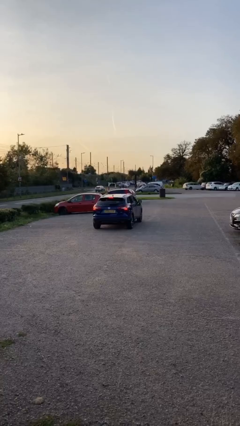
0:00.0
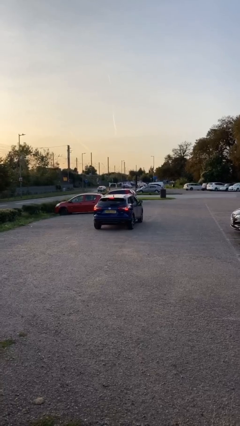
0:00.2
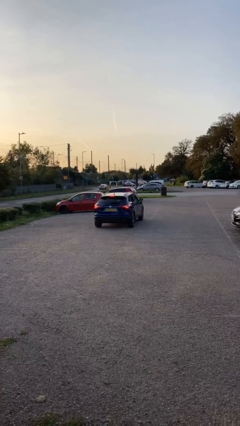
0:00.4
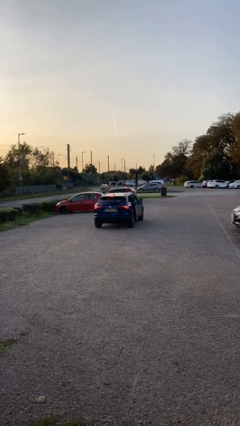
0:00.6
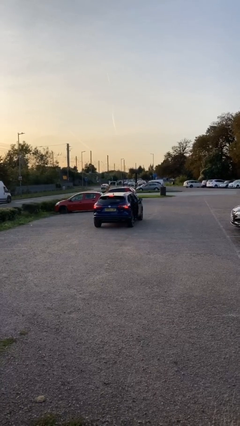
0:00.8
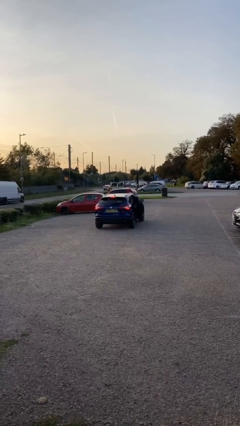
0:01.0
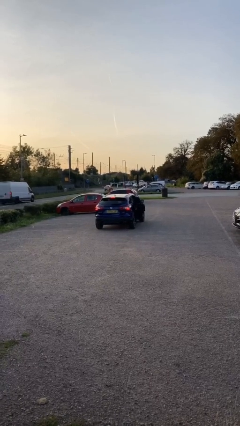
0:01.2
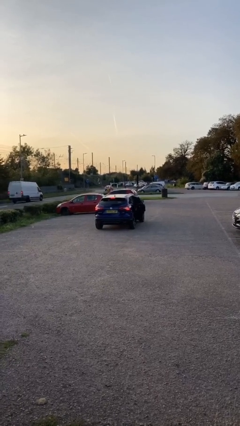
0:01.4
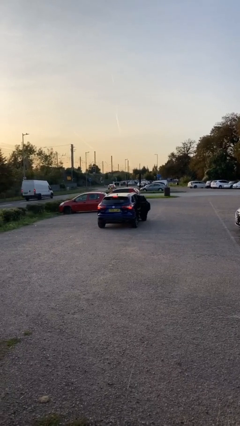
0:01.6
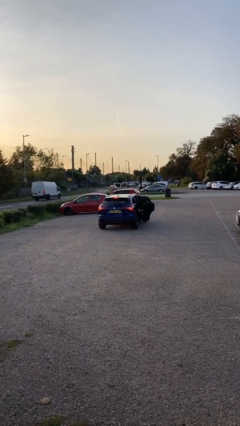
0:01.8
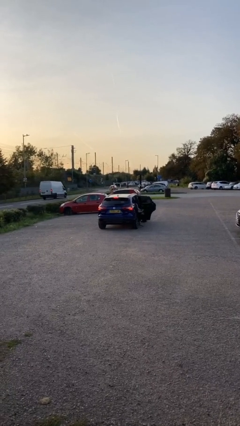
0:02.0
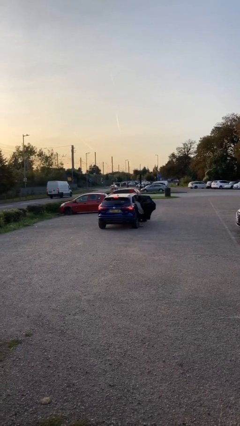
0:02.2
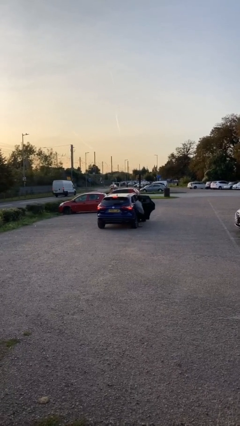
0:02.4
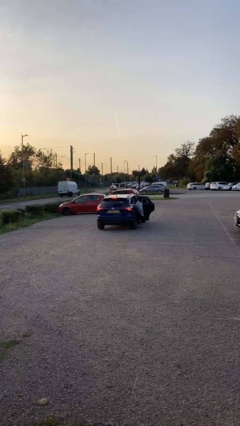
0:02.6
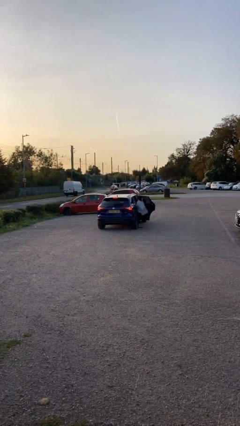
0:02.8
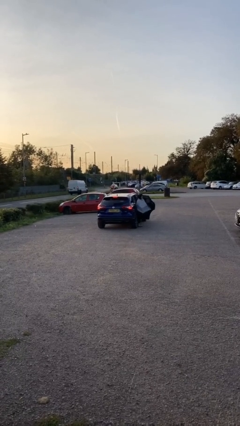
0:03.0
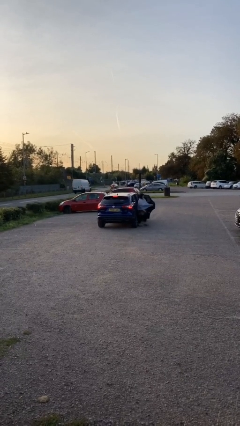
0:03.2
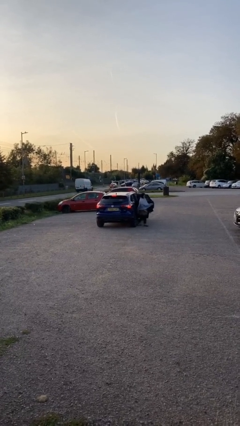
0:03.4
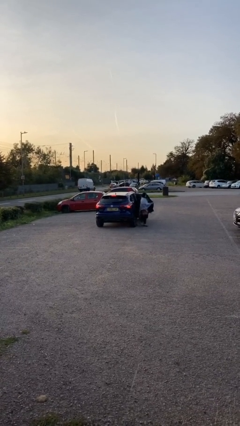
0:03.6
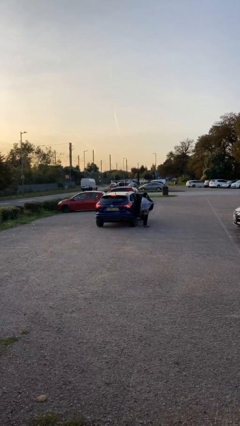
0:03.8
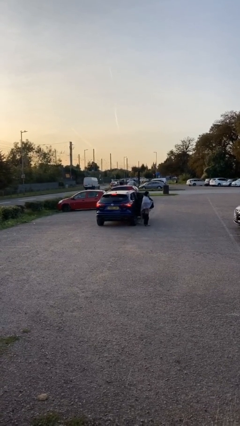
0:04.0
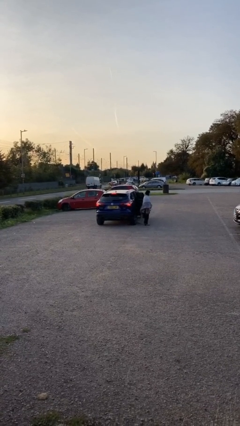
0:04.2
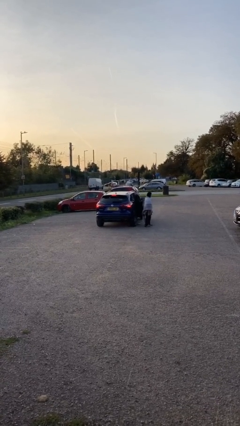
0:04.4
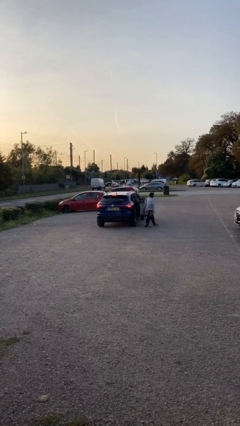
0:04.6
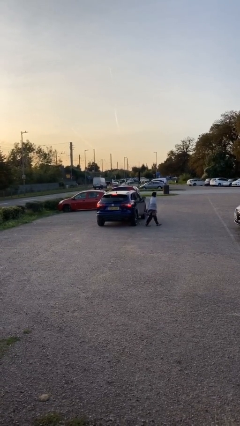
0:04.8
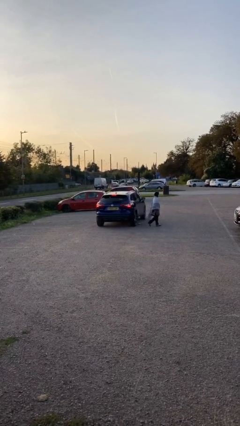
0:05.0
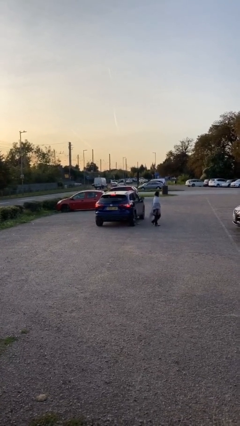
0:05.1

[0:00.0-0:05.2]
car drops off person

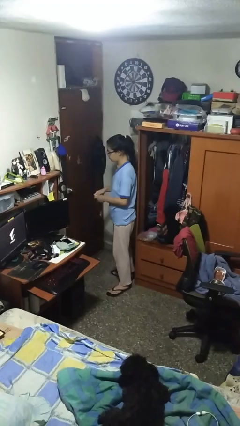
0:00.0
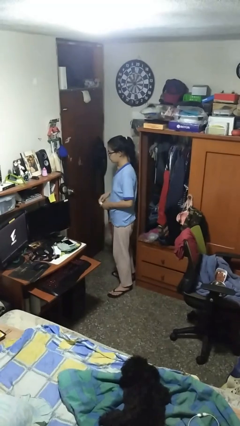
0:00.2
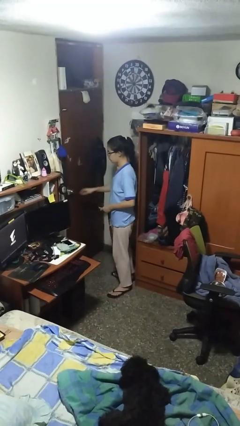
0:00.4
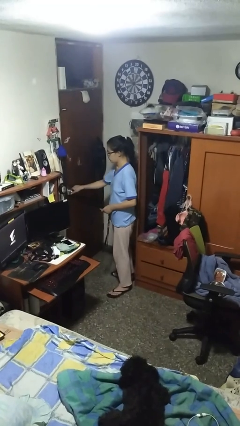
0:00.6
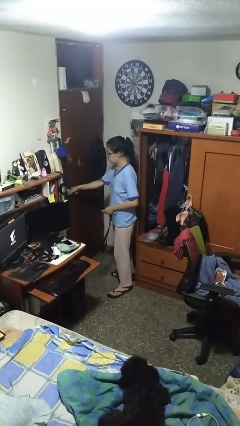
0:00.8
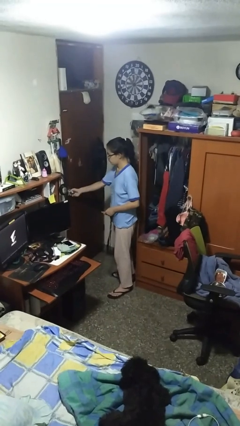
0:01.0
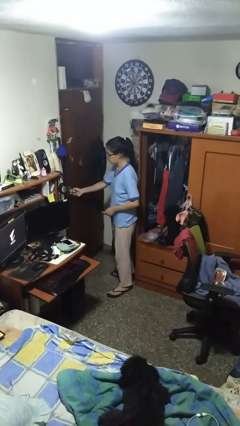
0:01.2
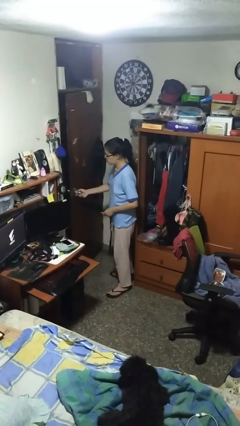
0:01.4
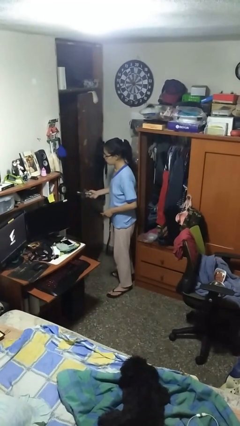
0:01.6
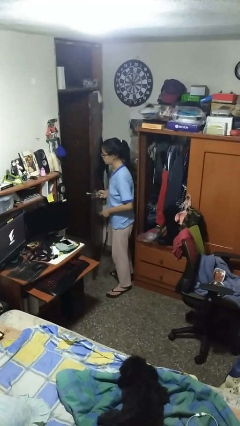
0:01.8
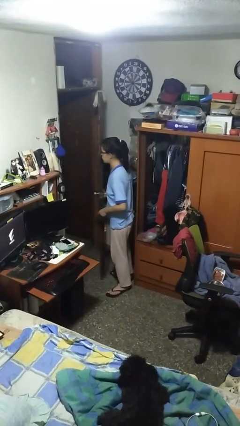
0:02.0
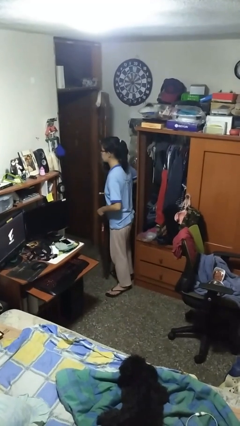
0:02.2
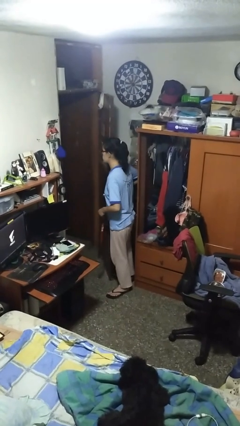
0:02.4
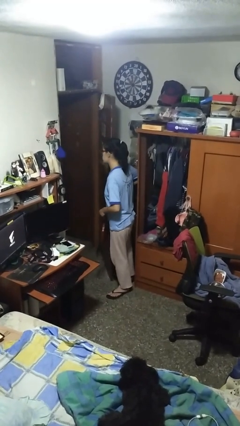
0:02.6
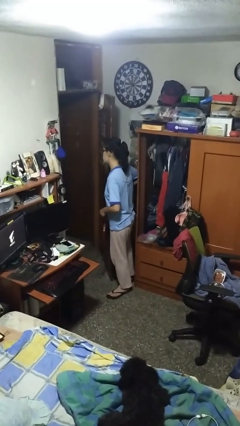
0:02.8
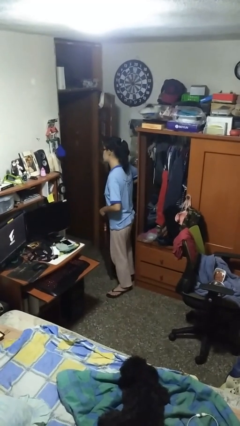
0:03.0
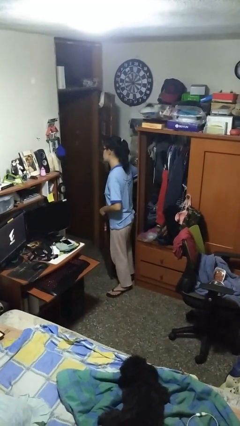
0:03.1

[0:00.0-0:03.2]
person opens facility door

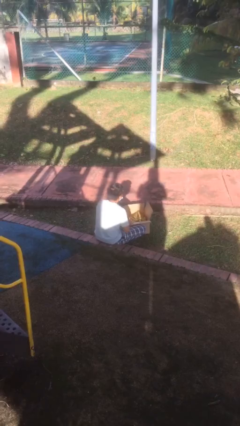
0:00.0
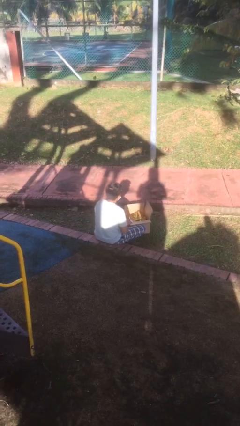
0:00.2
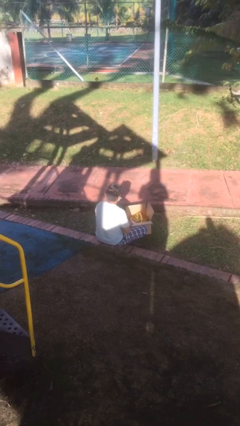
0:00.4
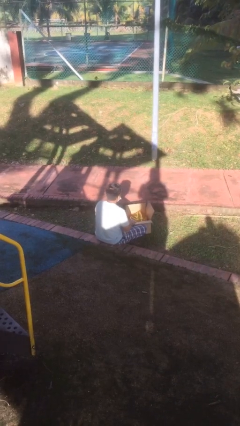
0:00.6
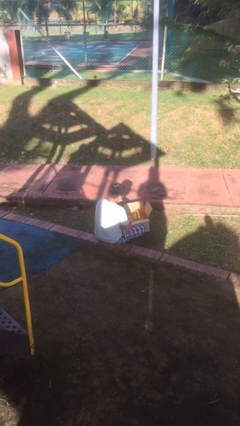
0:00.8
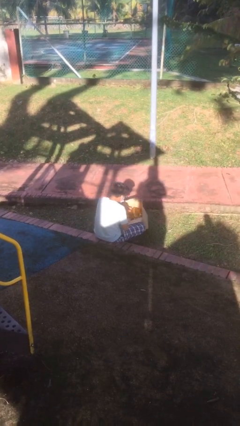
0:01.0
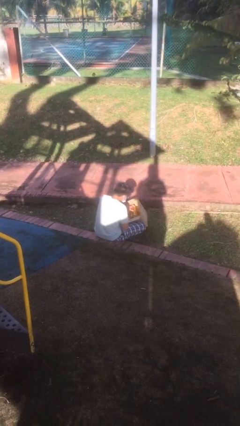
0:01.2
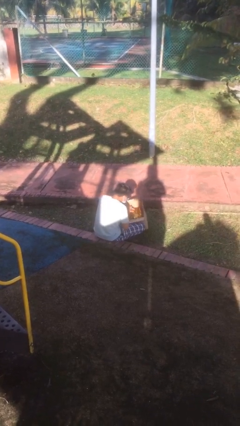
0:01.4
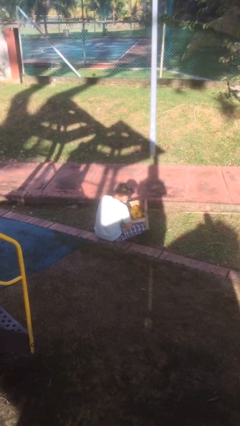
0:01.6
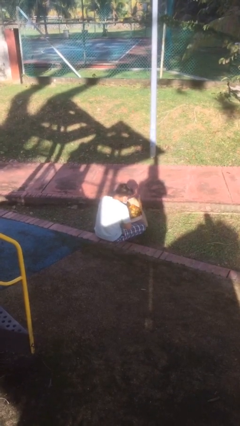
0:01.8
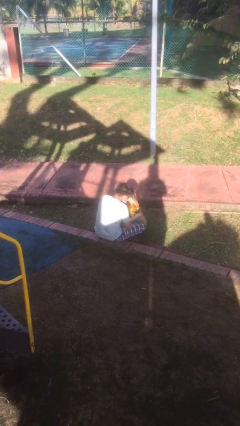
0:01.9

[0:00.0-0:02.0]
person searches in box

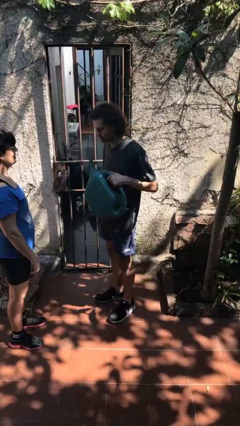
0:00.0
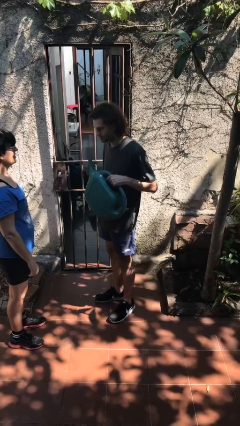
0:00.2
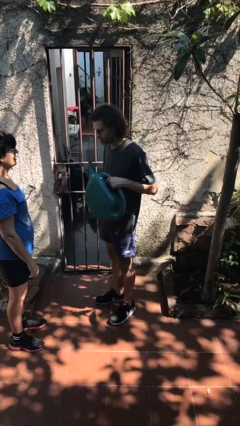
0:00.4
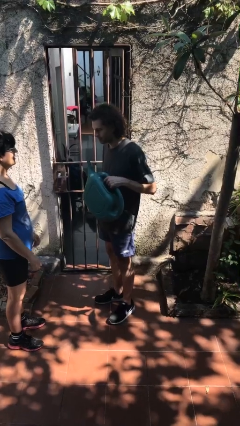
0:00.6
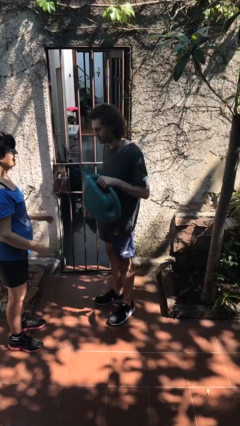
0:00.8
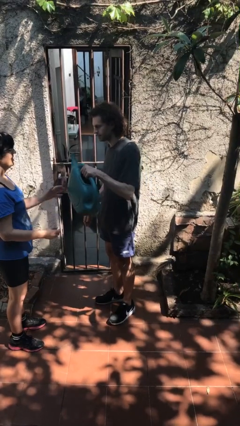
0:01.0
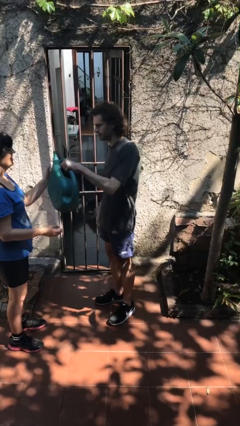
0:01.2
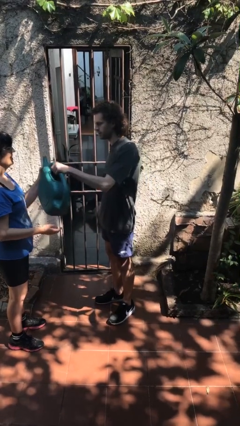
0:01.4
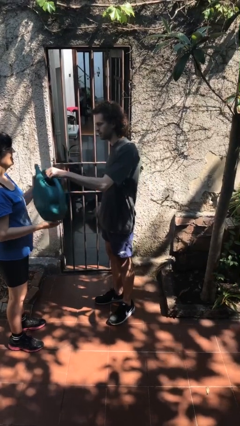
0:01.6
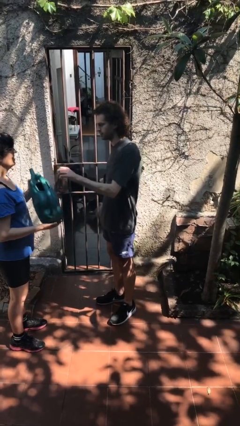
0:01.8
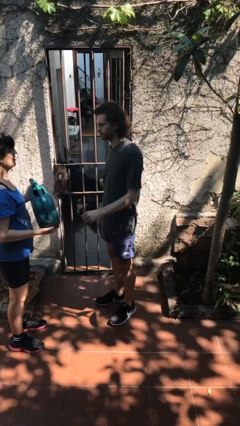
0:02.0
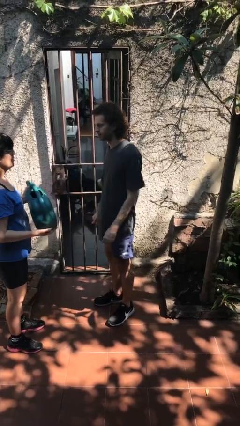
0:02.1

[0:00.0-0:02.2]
person transfers object to person

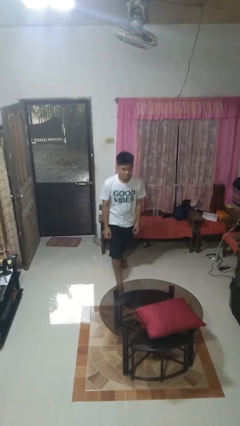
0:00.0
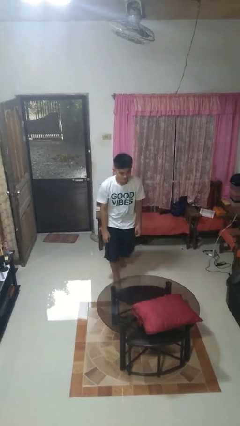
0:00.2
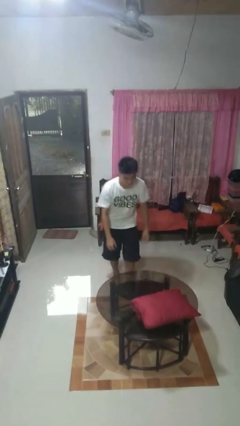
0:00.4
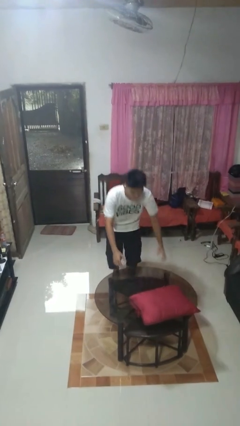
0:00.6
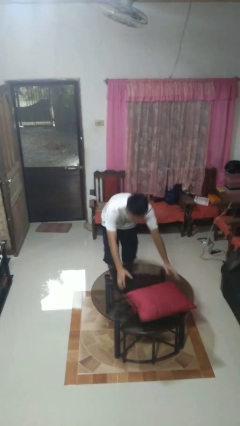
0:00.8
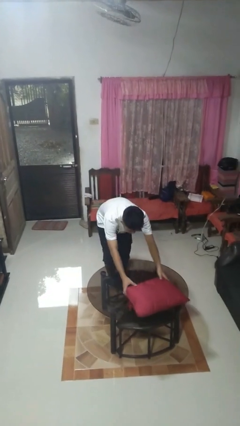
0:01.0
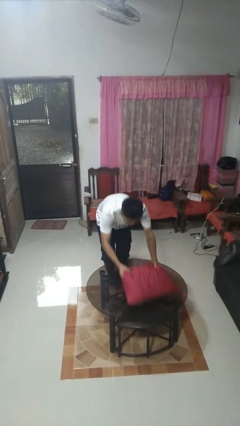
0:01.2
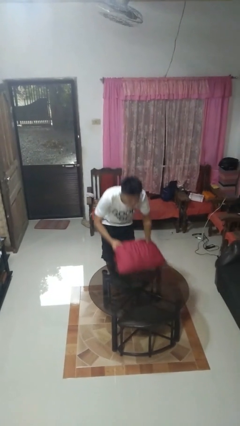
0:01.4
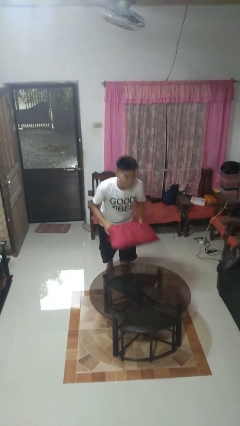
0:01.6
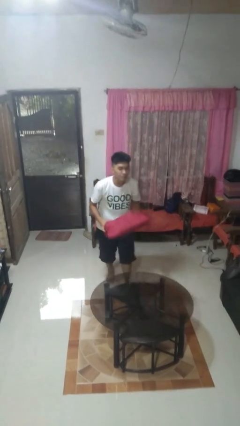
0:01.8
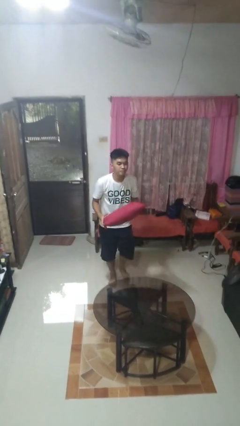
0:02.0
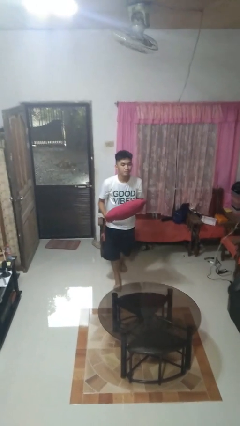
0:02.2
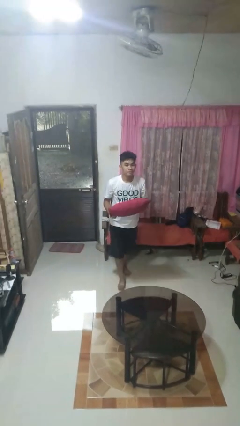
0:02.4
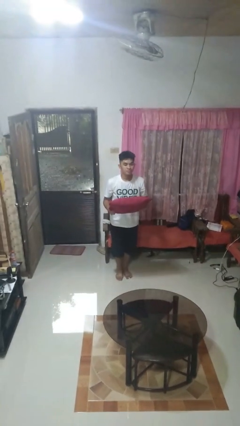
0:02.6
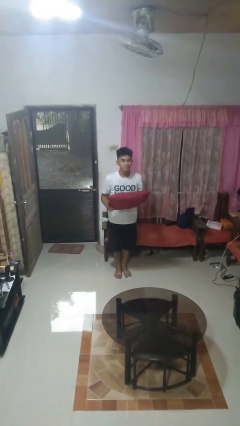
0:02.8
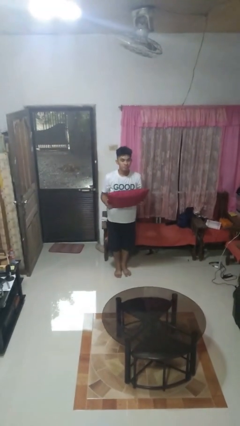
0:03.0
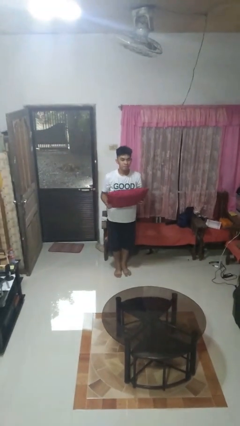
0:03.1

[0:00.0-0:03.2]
person picks up object from table

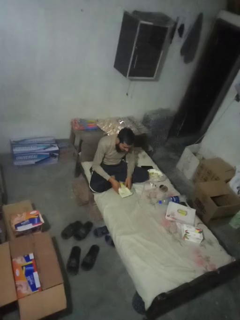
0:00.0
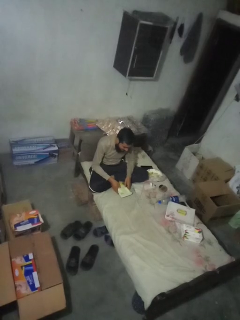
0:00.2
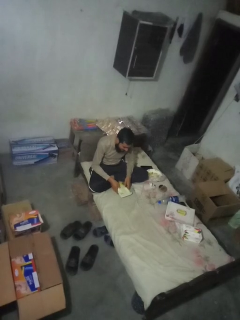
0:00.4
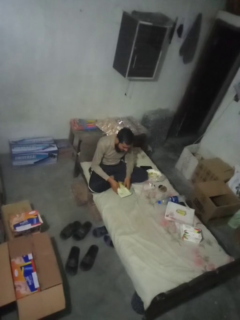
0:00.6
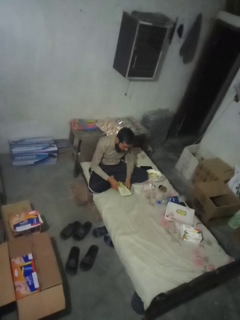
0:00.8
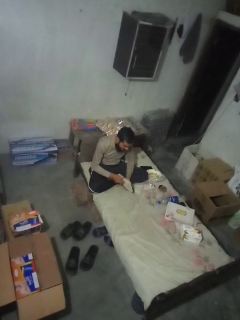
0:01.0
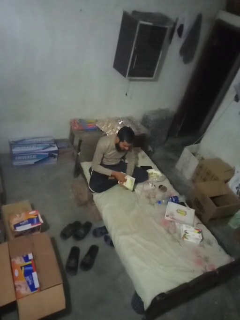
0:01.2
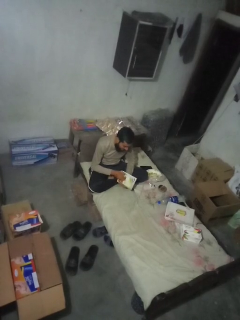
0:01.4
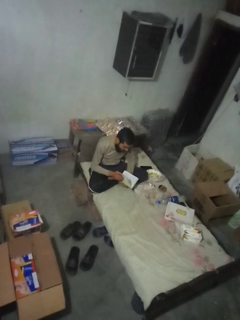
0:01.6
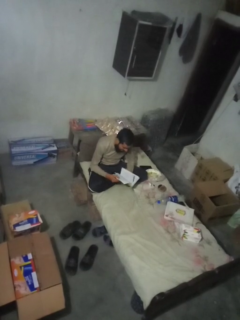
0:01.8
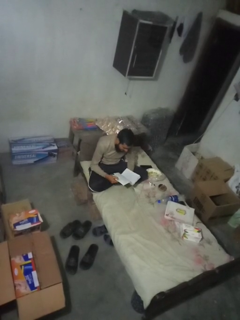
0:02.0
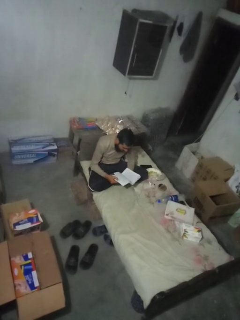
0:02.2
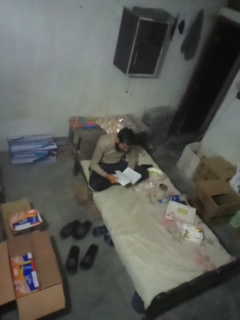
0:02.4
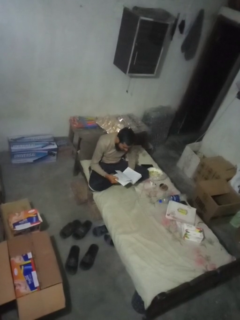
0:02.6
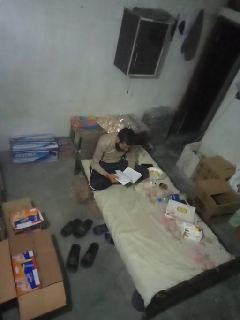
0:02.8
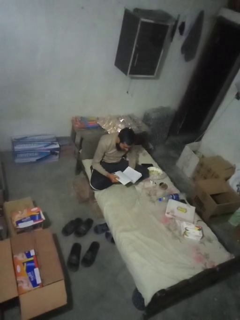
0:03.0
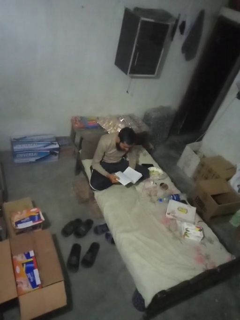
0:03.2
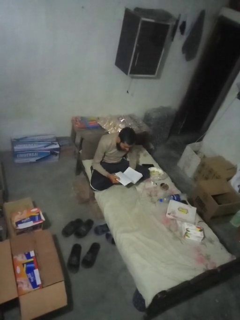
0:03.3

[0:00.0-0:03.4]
person reads book
